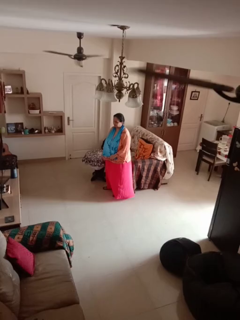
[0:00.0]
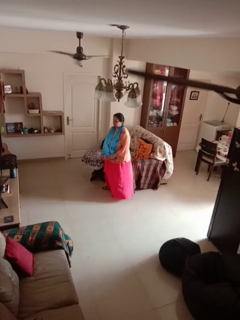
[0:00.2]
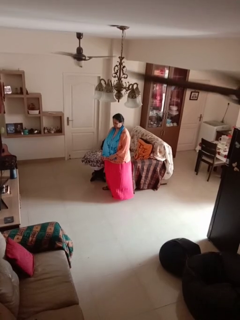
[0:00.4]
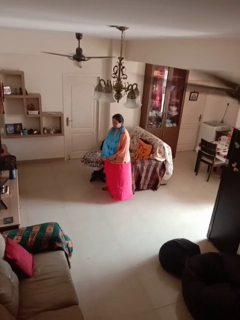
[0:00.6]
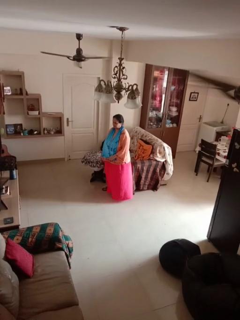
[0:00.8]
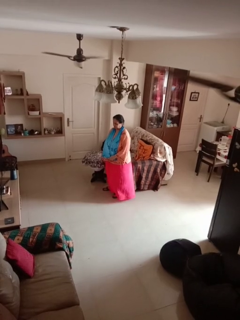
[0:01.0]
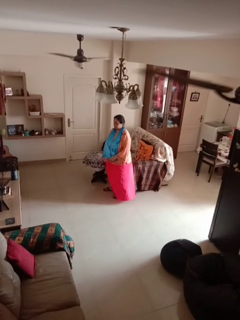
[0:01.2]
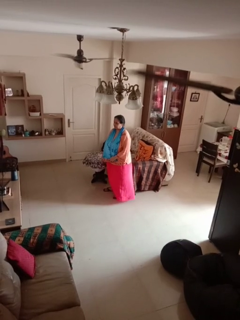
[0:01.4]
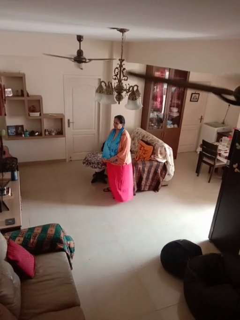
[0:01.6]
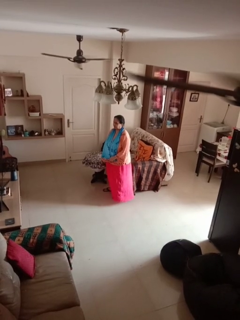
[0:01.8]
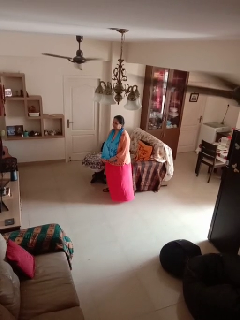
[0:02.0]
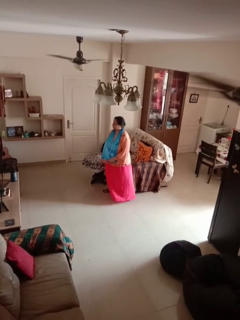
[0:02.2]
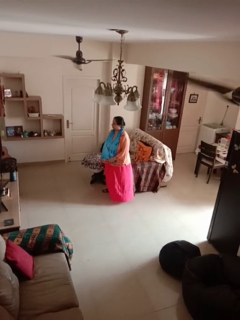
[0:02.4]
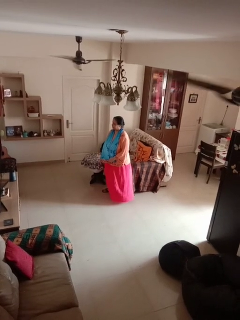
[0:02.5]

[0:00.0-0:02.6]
person nods head

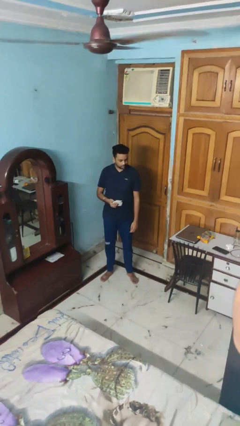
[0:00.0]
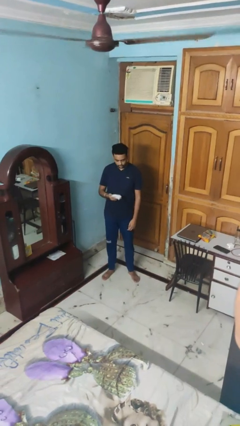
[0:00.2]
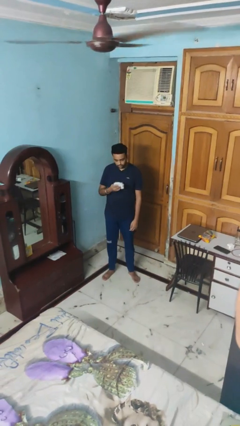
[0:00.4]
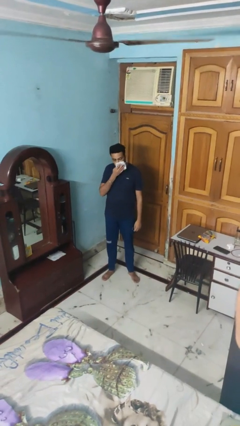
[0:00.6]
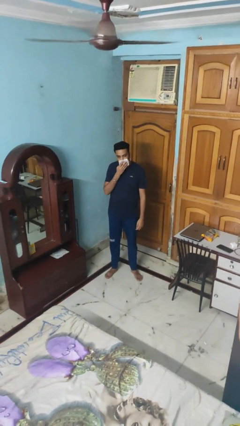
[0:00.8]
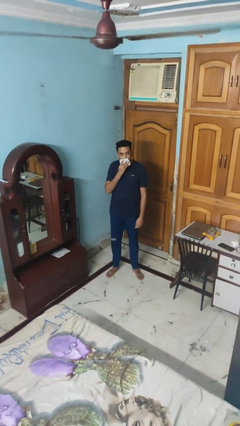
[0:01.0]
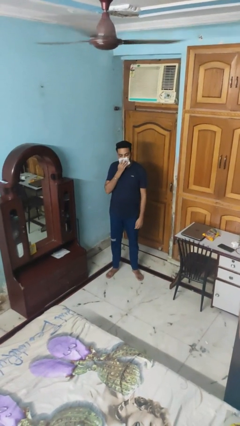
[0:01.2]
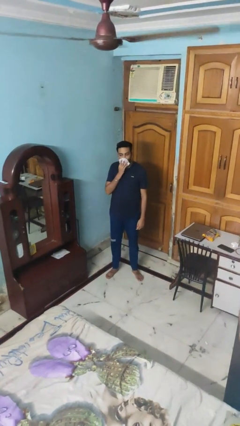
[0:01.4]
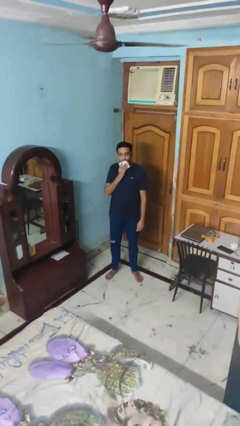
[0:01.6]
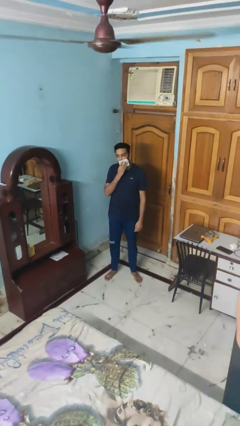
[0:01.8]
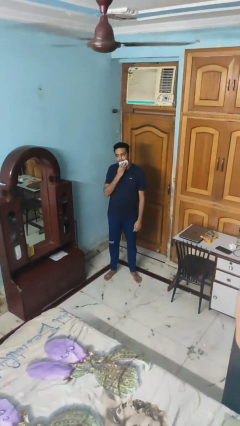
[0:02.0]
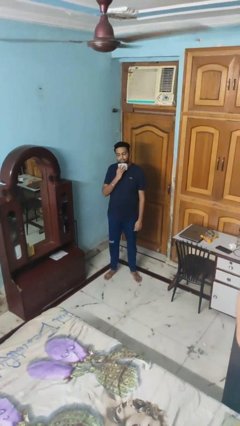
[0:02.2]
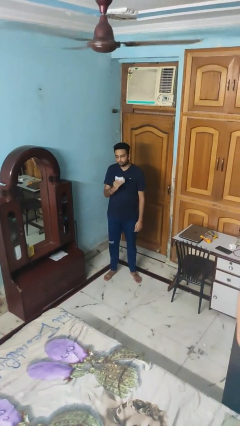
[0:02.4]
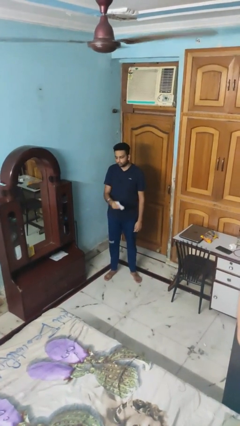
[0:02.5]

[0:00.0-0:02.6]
person wipes mouth with napkin

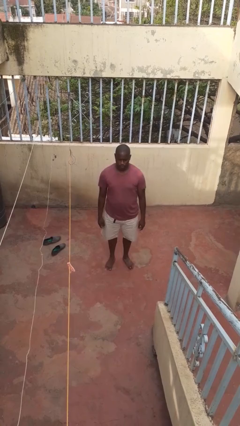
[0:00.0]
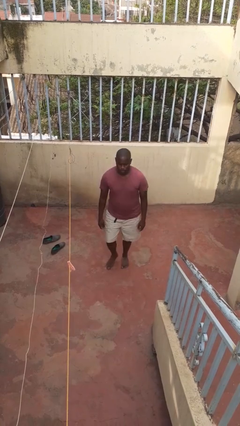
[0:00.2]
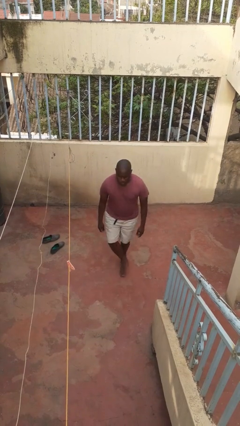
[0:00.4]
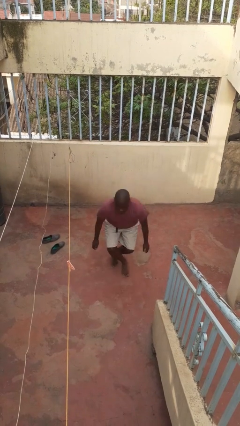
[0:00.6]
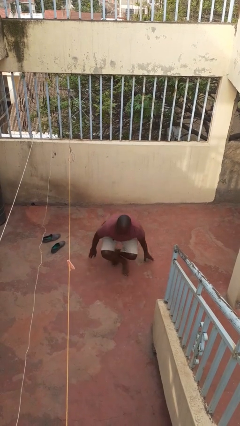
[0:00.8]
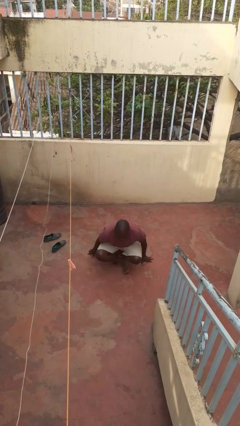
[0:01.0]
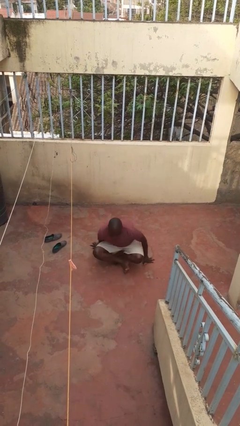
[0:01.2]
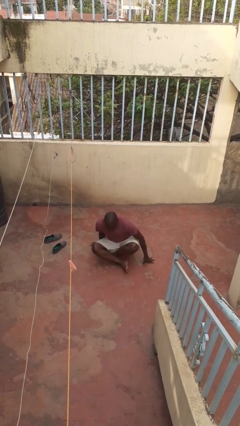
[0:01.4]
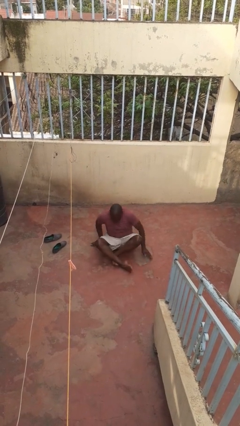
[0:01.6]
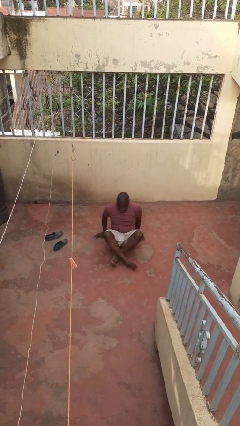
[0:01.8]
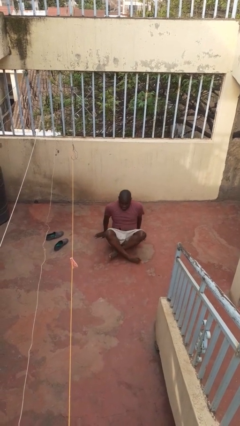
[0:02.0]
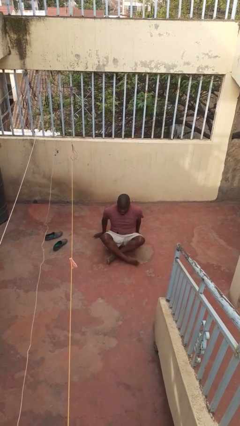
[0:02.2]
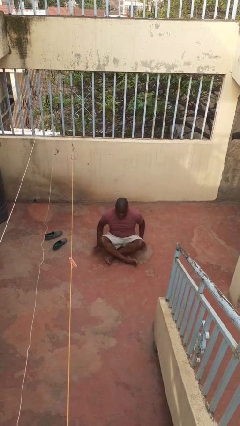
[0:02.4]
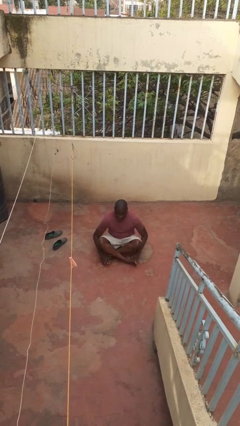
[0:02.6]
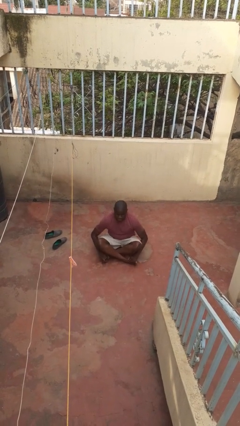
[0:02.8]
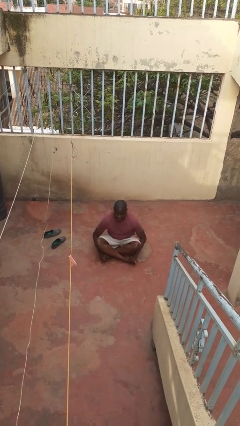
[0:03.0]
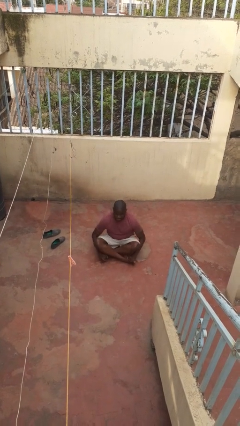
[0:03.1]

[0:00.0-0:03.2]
person sits crisscross

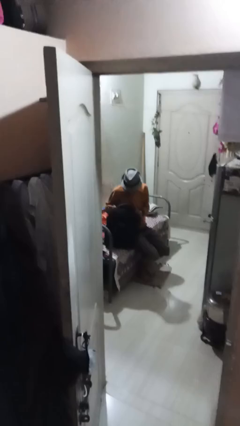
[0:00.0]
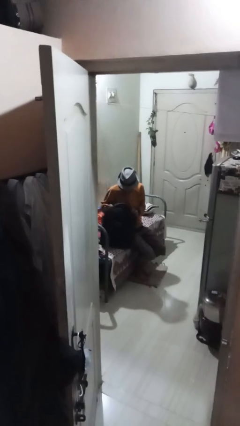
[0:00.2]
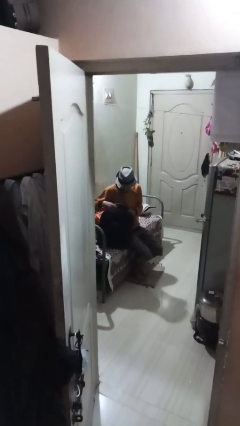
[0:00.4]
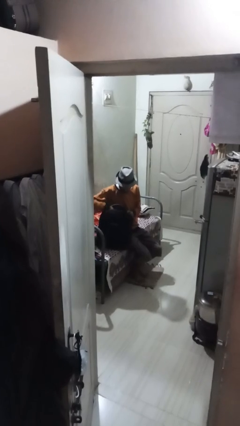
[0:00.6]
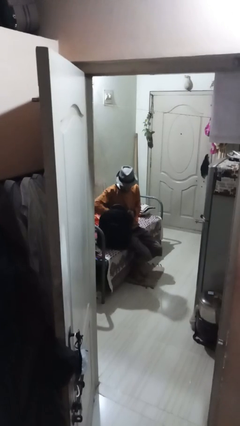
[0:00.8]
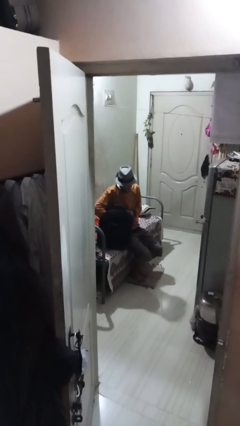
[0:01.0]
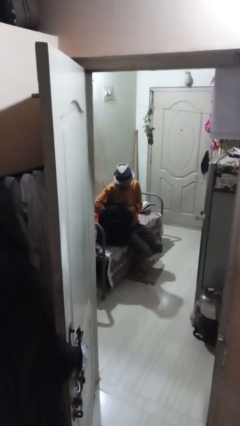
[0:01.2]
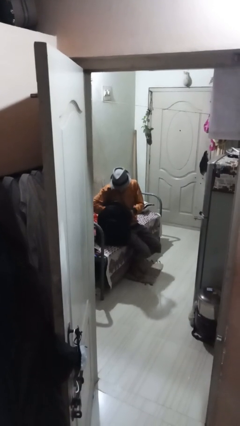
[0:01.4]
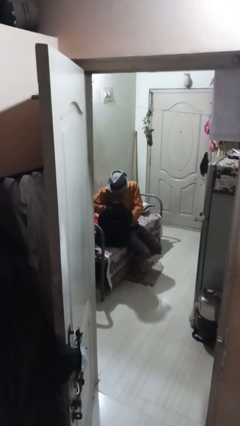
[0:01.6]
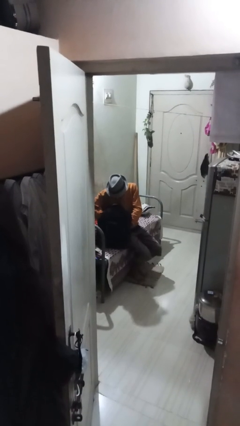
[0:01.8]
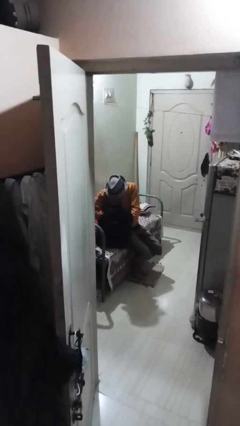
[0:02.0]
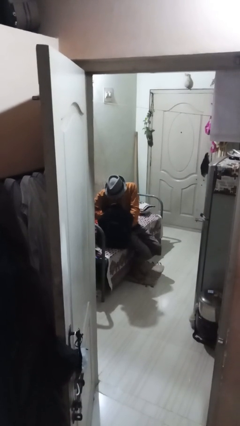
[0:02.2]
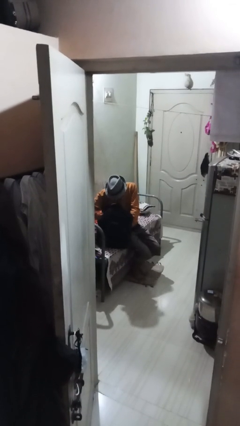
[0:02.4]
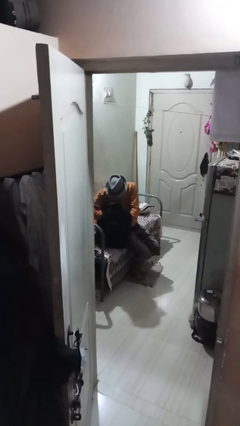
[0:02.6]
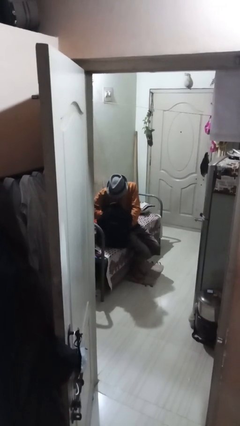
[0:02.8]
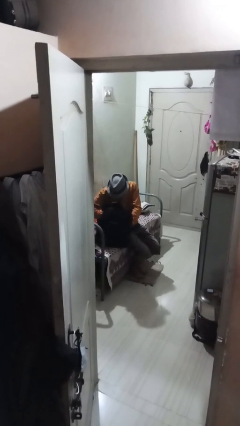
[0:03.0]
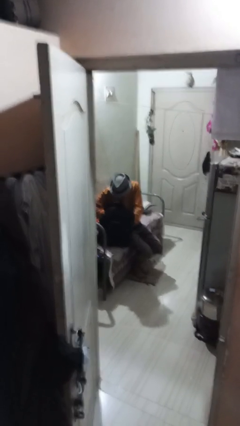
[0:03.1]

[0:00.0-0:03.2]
person searches in backpack

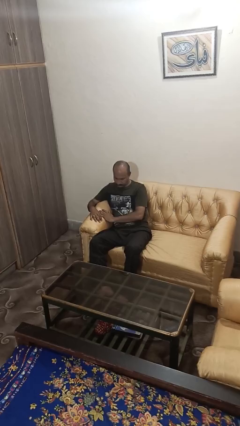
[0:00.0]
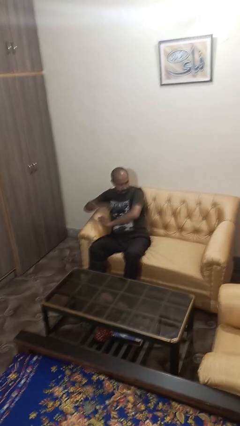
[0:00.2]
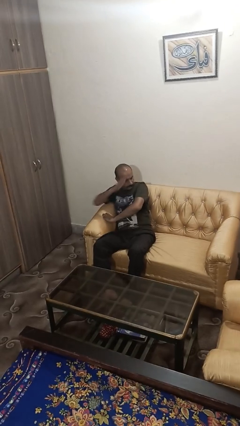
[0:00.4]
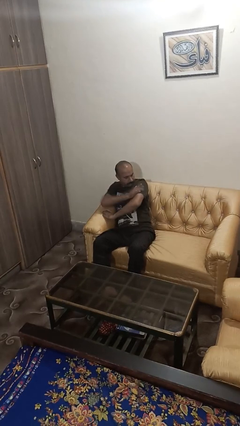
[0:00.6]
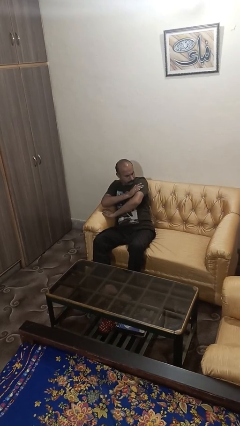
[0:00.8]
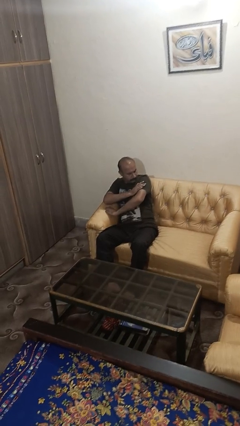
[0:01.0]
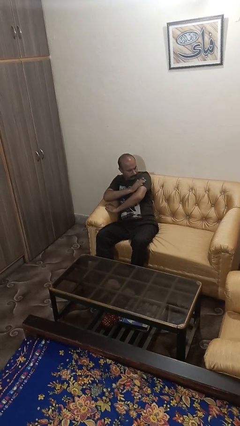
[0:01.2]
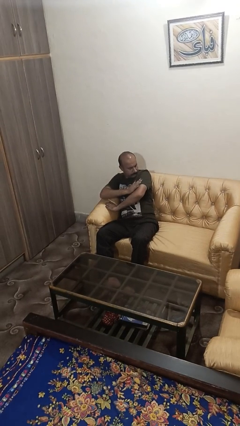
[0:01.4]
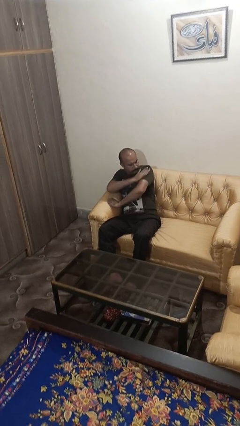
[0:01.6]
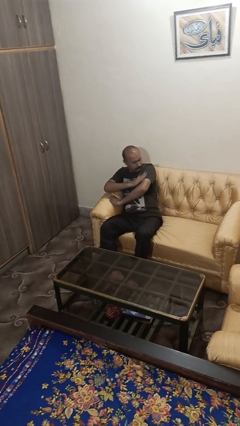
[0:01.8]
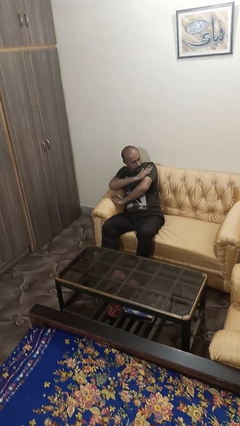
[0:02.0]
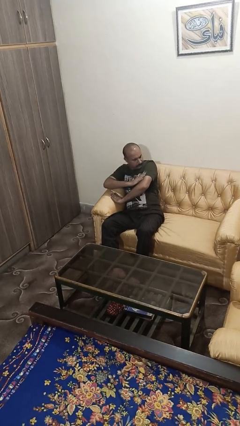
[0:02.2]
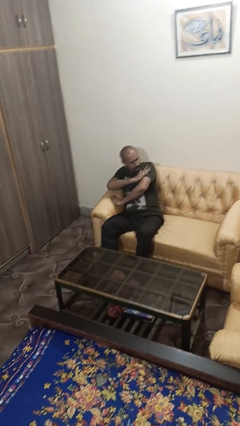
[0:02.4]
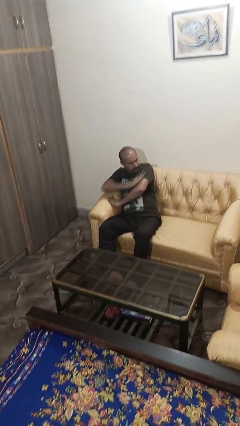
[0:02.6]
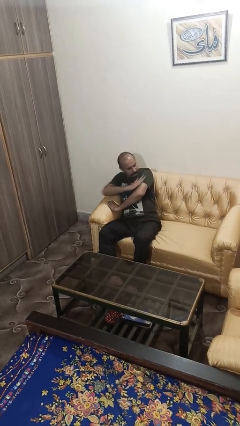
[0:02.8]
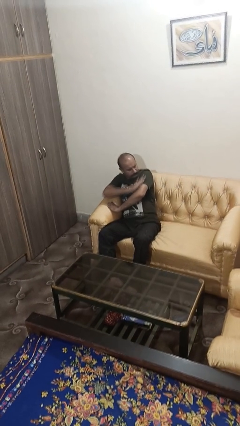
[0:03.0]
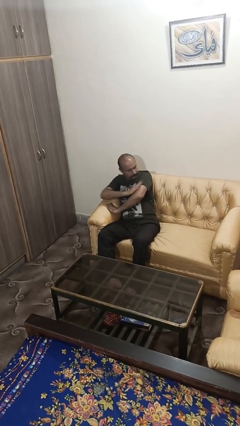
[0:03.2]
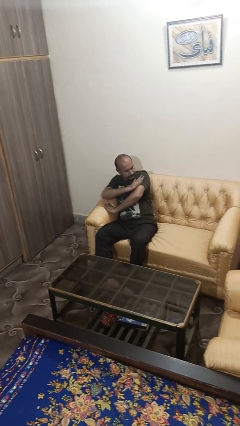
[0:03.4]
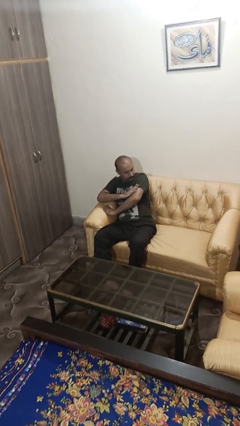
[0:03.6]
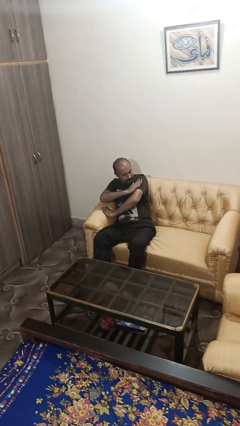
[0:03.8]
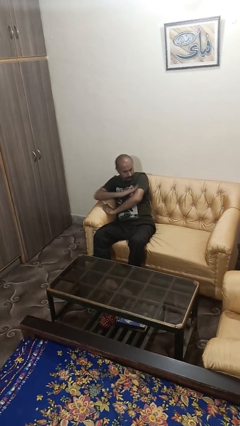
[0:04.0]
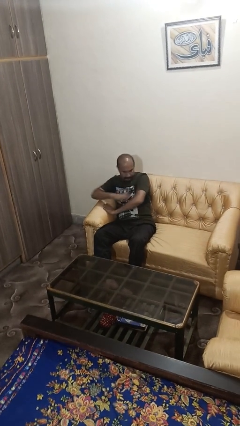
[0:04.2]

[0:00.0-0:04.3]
person swats bug

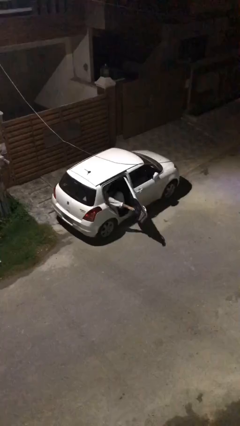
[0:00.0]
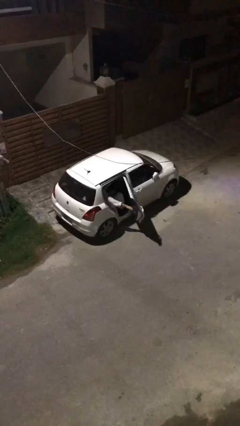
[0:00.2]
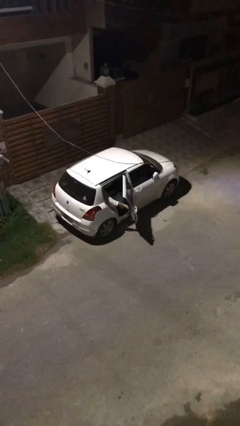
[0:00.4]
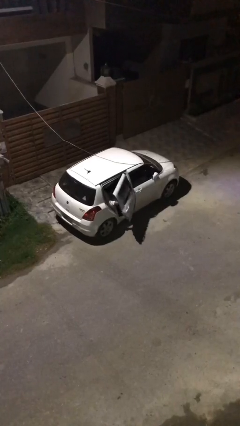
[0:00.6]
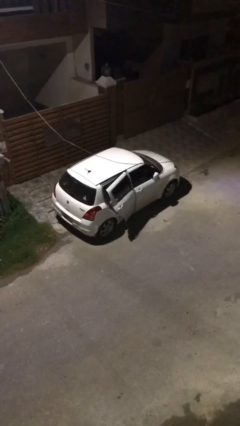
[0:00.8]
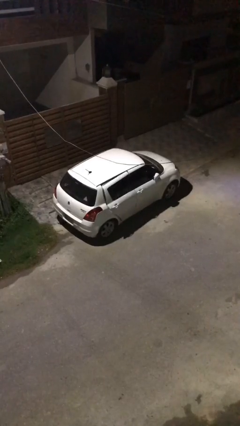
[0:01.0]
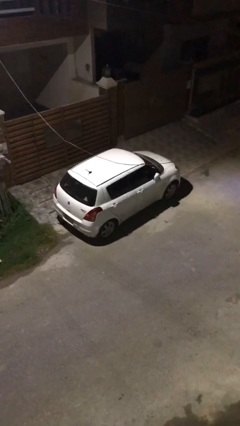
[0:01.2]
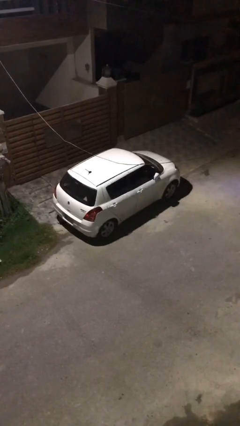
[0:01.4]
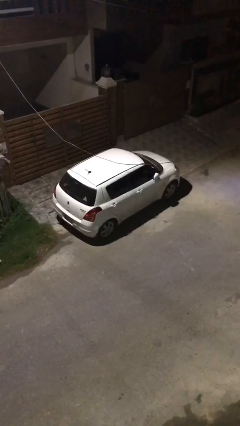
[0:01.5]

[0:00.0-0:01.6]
person closes car door

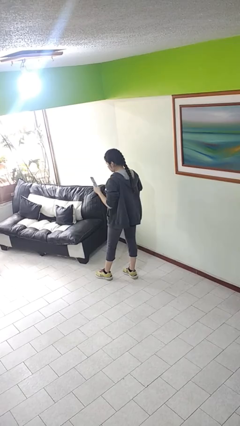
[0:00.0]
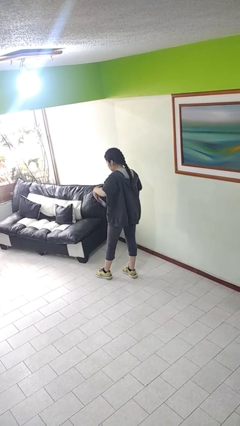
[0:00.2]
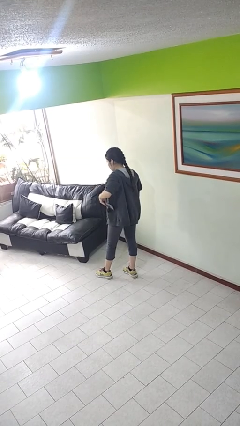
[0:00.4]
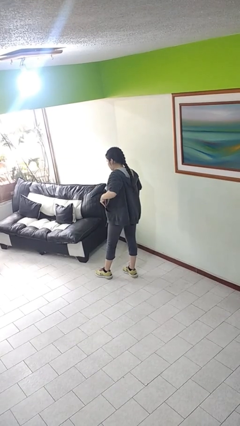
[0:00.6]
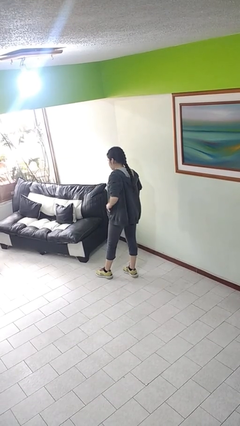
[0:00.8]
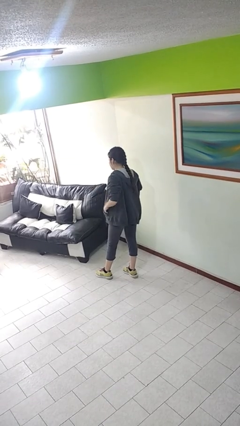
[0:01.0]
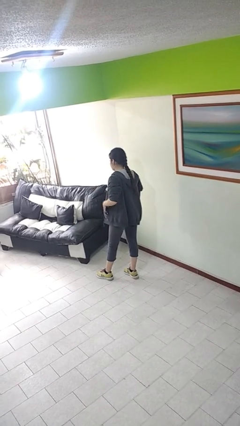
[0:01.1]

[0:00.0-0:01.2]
person puts phone into pocket
